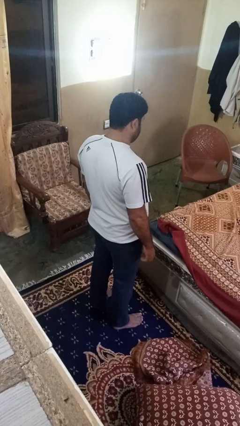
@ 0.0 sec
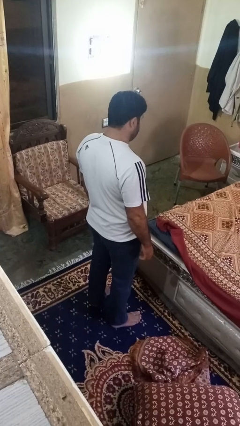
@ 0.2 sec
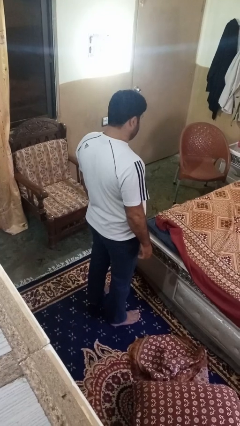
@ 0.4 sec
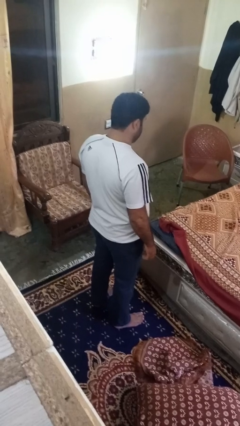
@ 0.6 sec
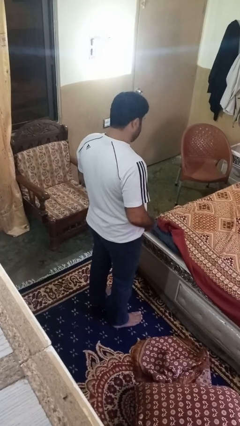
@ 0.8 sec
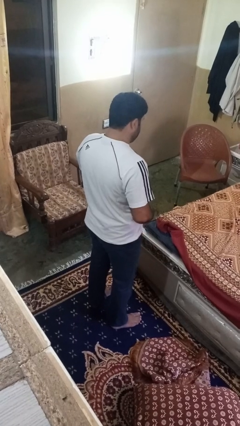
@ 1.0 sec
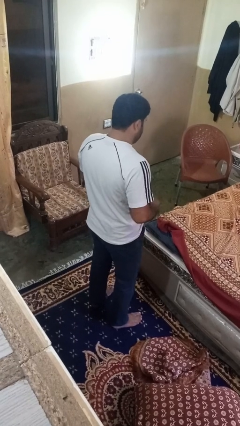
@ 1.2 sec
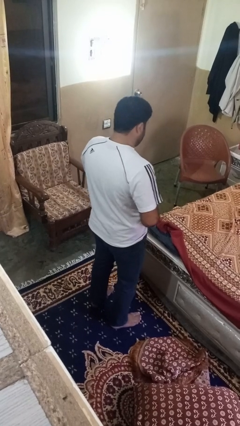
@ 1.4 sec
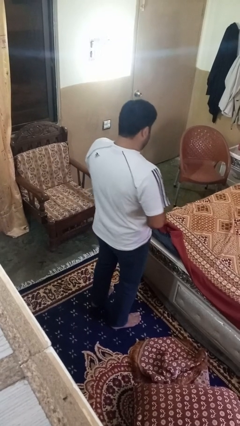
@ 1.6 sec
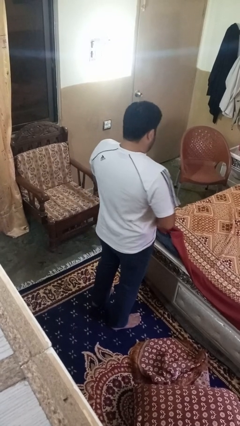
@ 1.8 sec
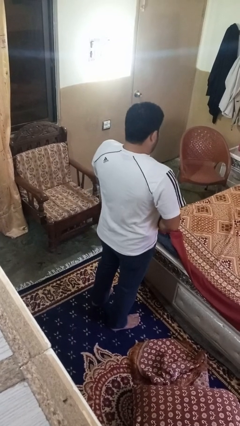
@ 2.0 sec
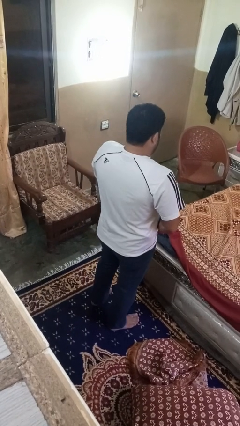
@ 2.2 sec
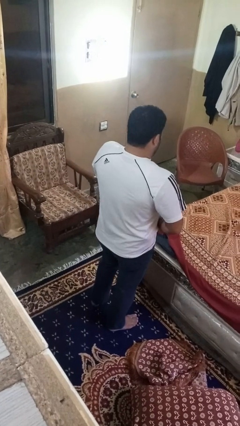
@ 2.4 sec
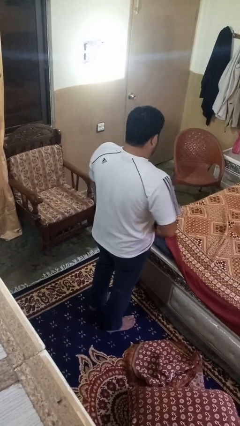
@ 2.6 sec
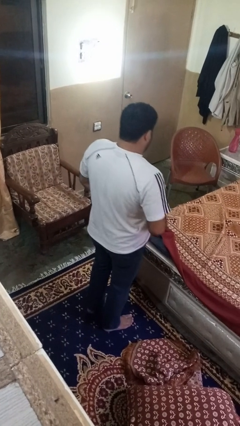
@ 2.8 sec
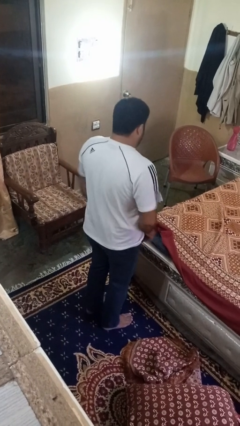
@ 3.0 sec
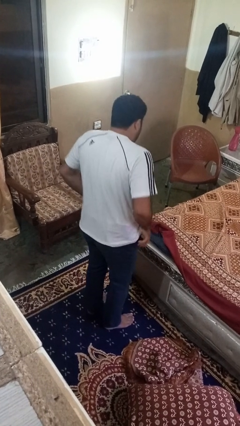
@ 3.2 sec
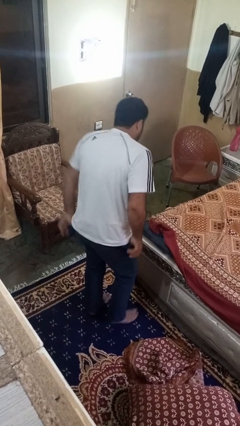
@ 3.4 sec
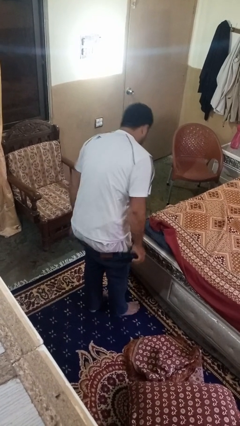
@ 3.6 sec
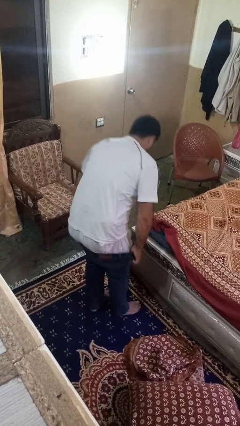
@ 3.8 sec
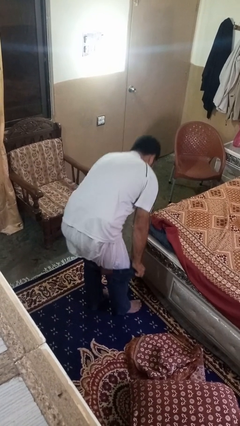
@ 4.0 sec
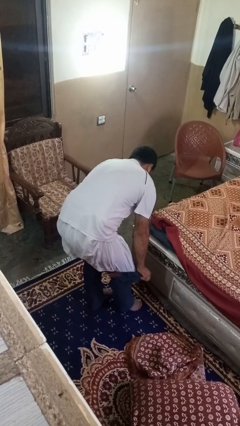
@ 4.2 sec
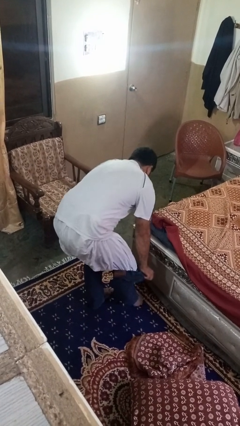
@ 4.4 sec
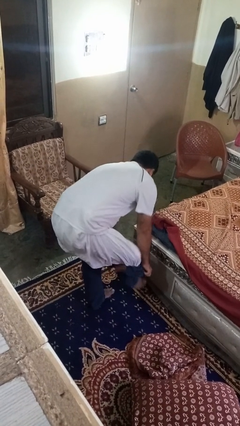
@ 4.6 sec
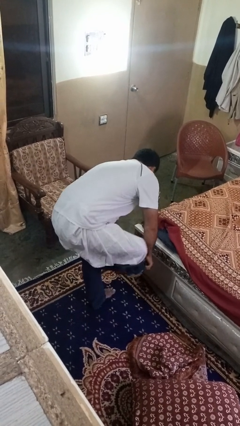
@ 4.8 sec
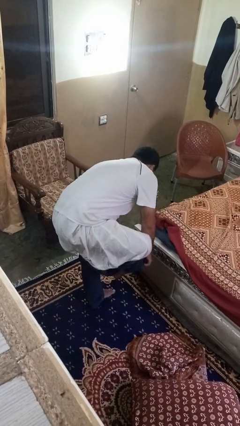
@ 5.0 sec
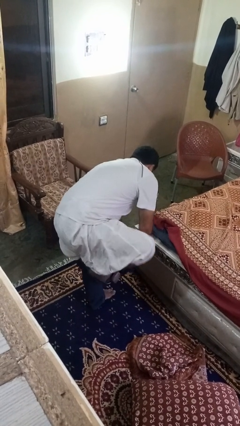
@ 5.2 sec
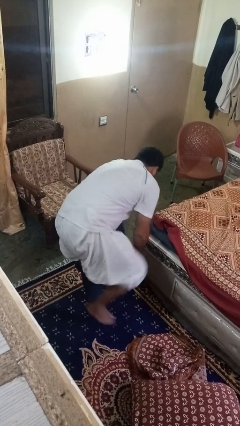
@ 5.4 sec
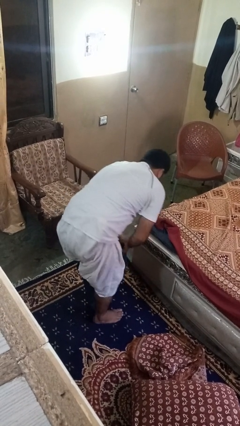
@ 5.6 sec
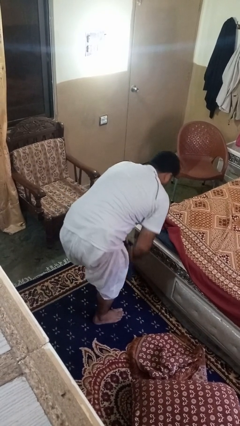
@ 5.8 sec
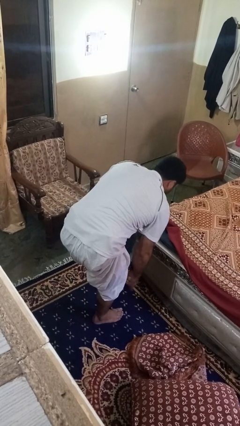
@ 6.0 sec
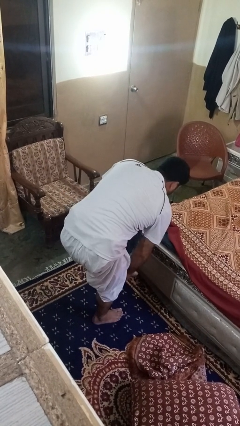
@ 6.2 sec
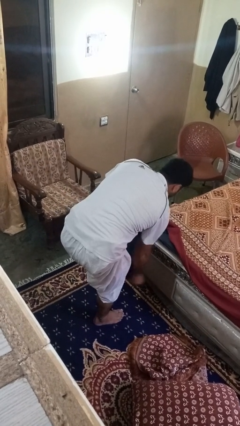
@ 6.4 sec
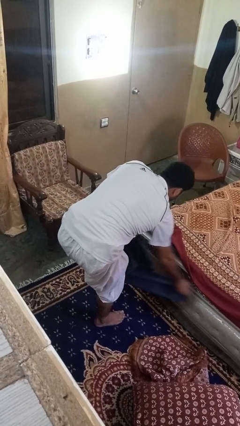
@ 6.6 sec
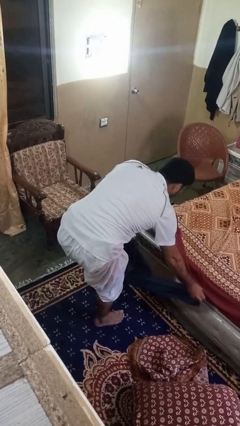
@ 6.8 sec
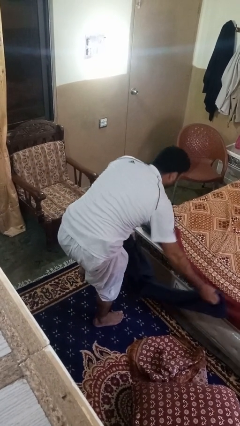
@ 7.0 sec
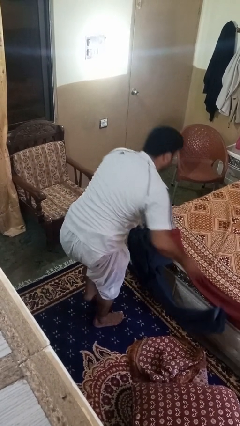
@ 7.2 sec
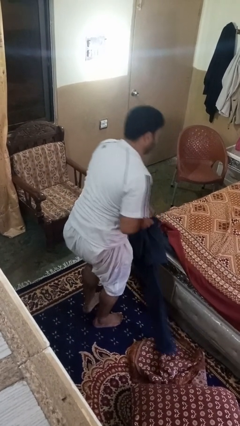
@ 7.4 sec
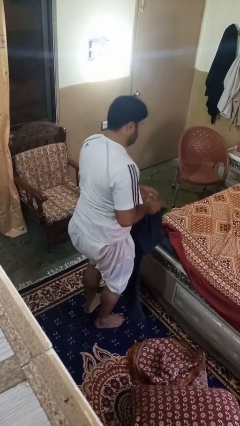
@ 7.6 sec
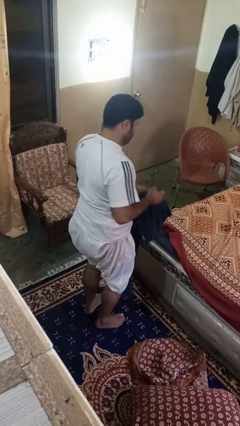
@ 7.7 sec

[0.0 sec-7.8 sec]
person takes off pants

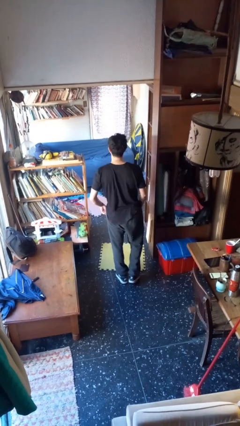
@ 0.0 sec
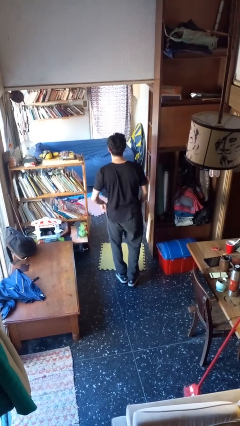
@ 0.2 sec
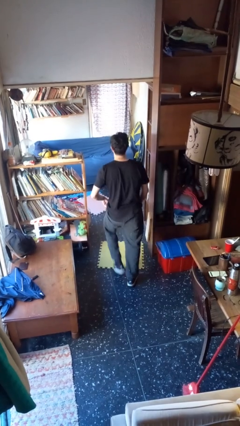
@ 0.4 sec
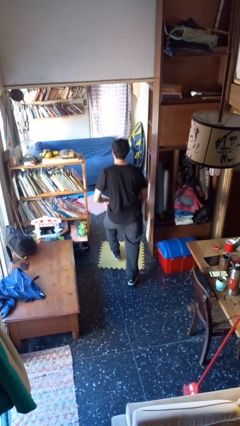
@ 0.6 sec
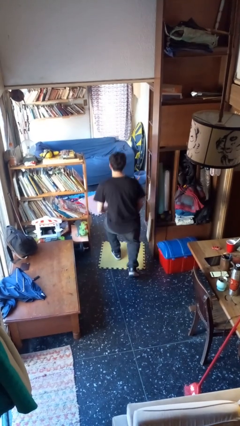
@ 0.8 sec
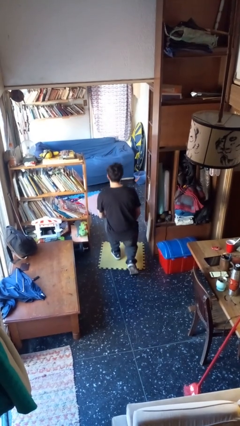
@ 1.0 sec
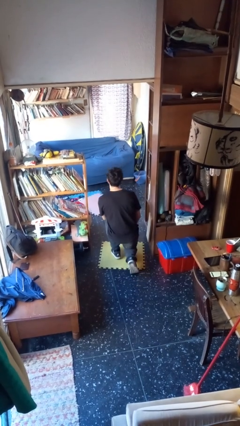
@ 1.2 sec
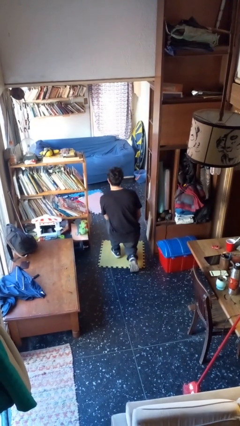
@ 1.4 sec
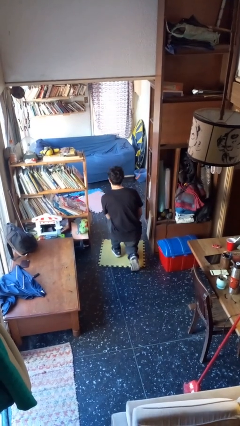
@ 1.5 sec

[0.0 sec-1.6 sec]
person kneels

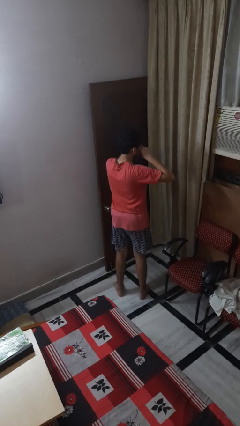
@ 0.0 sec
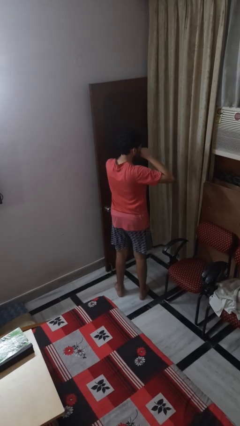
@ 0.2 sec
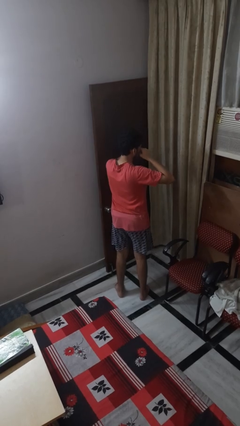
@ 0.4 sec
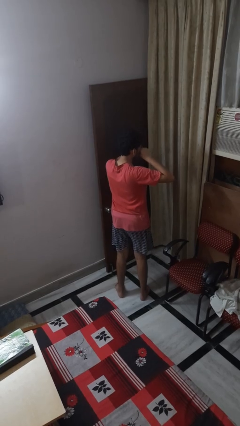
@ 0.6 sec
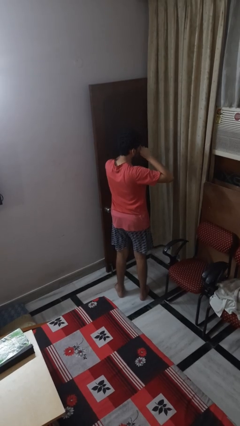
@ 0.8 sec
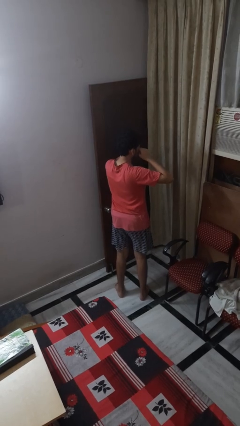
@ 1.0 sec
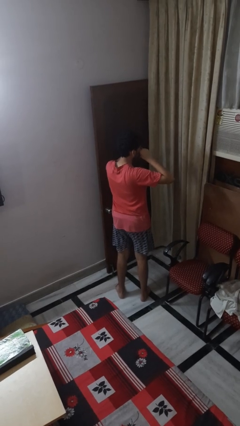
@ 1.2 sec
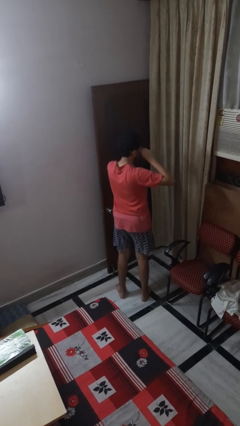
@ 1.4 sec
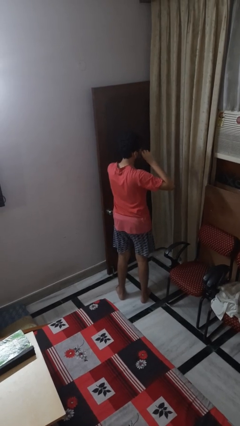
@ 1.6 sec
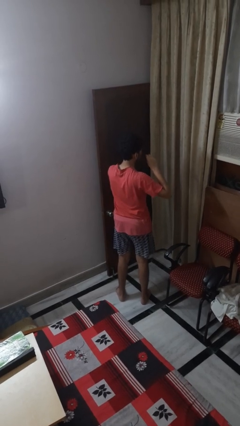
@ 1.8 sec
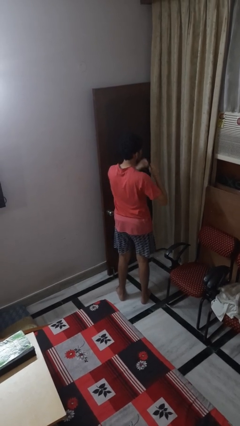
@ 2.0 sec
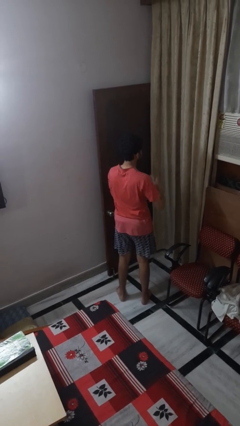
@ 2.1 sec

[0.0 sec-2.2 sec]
person rubs eyes

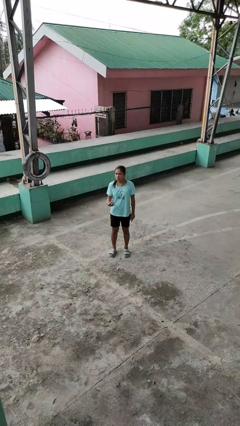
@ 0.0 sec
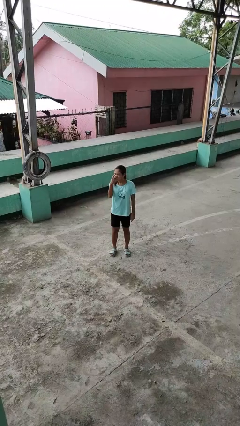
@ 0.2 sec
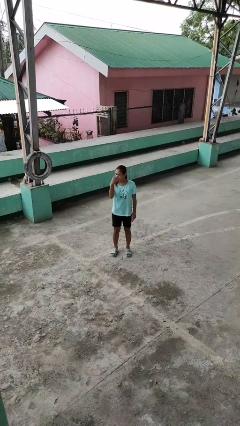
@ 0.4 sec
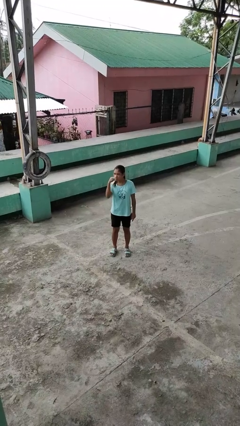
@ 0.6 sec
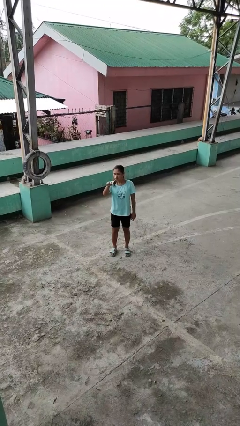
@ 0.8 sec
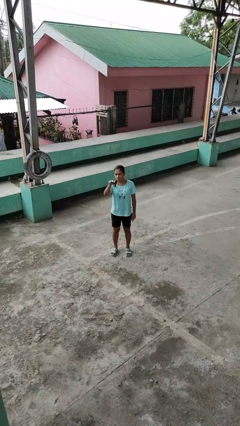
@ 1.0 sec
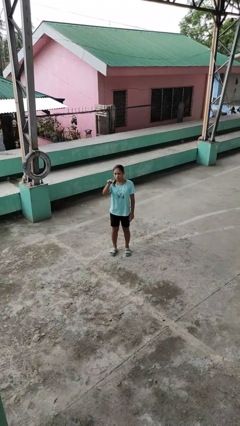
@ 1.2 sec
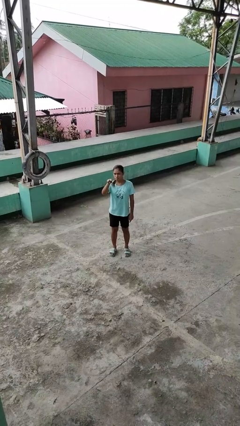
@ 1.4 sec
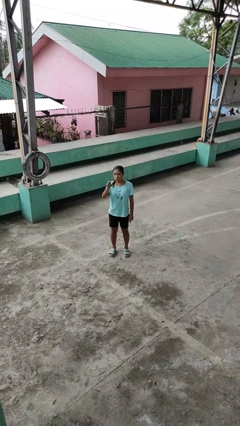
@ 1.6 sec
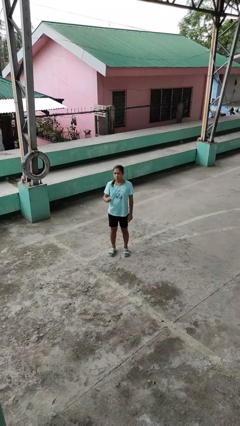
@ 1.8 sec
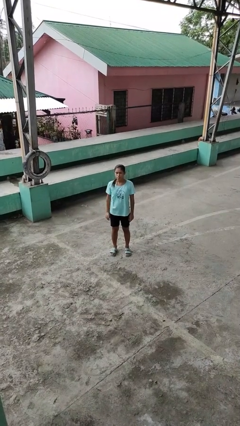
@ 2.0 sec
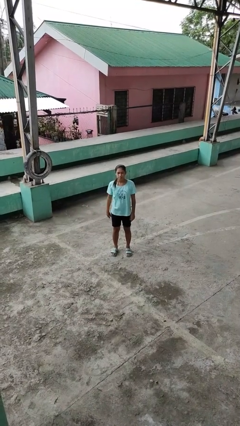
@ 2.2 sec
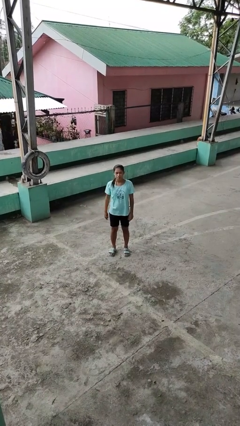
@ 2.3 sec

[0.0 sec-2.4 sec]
person gestures watch closely

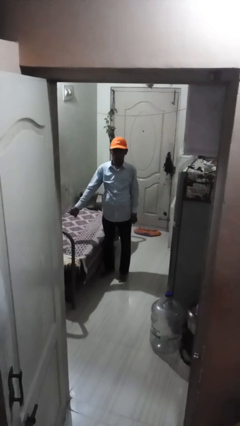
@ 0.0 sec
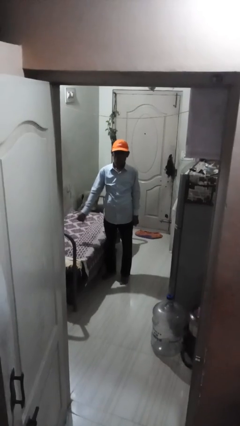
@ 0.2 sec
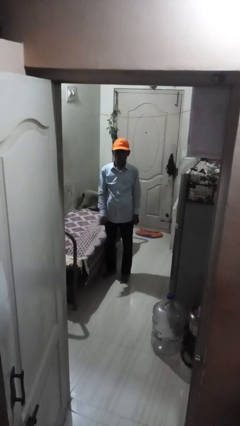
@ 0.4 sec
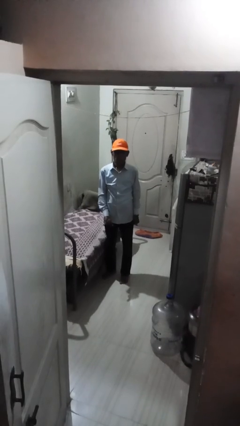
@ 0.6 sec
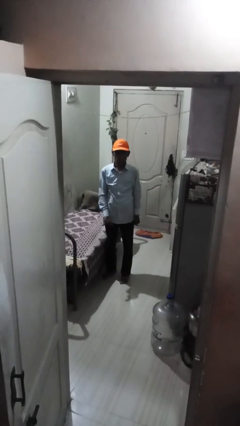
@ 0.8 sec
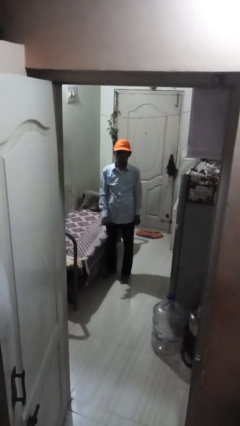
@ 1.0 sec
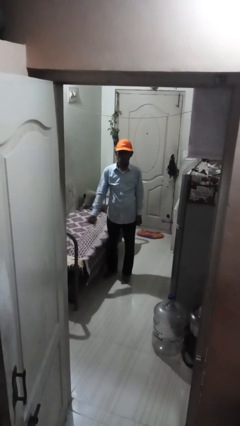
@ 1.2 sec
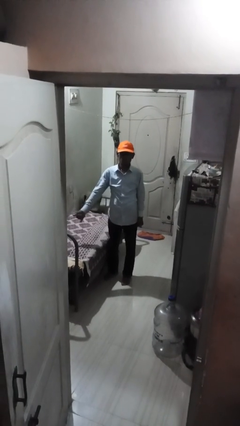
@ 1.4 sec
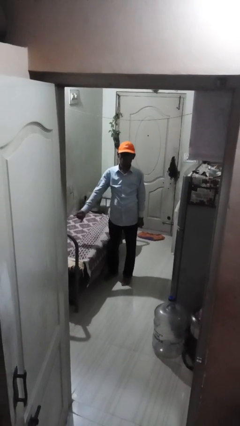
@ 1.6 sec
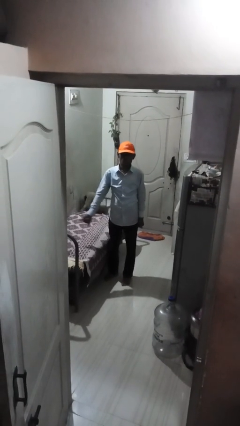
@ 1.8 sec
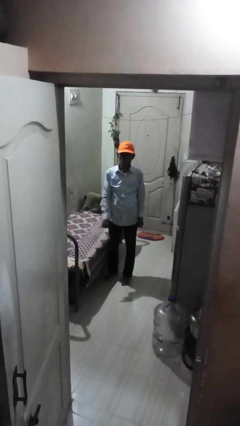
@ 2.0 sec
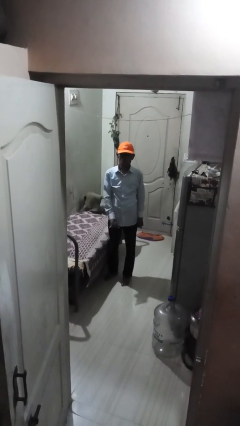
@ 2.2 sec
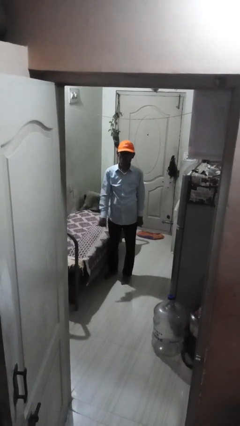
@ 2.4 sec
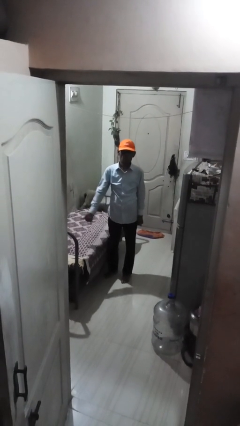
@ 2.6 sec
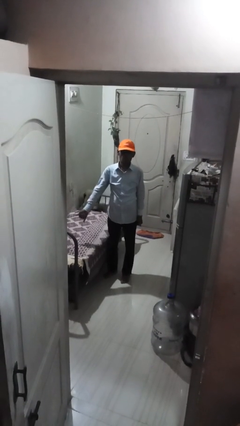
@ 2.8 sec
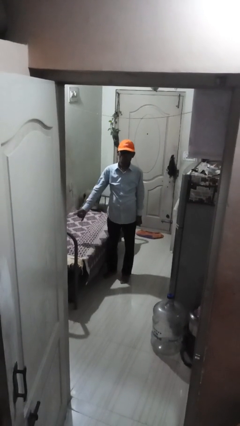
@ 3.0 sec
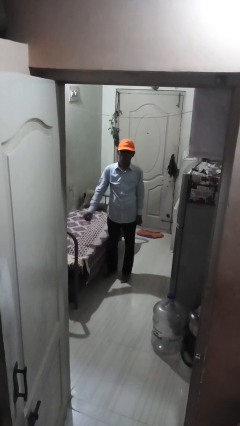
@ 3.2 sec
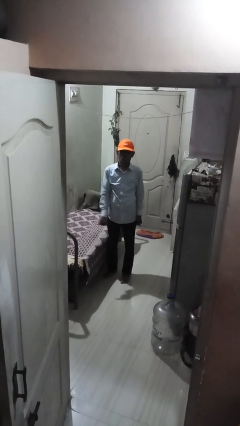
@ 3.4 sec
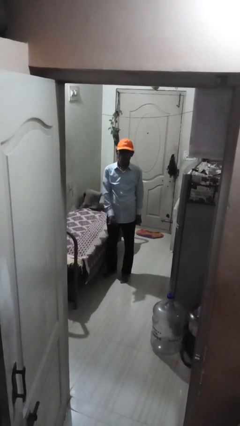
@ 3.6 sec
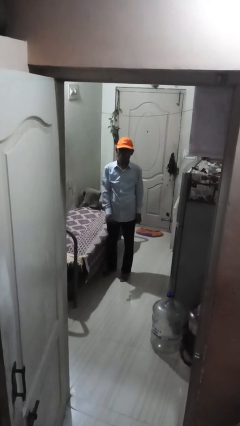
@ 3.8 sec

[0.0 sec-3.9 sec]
person gestures hang loose
